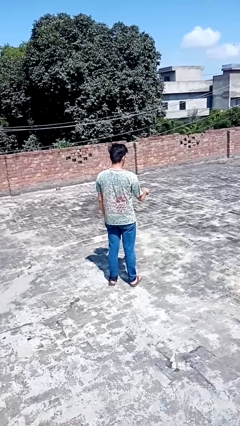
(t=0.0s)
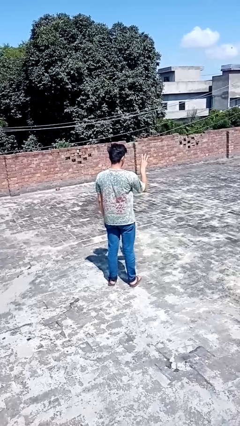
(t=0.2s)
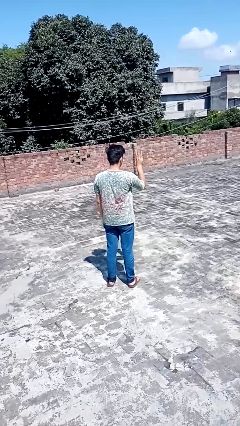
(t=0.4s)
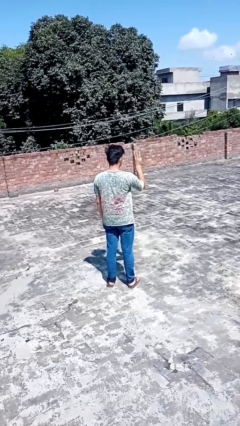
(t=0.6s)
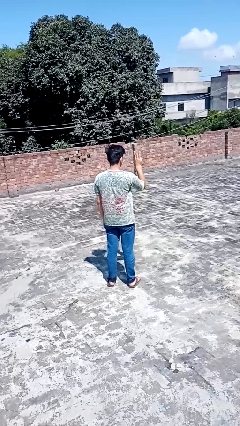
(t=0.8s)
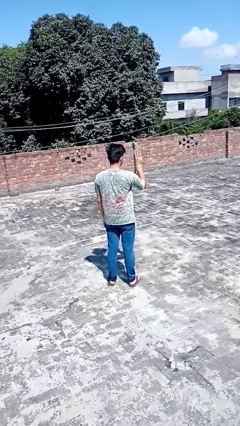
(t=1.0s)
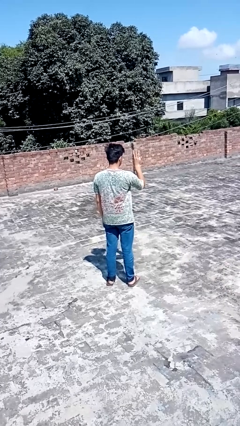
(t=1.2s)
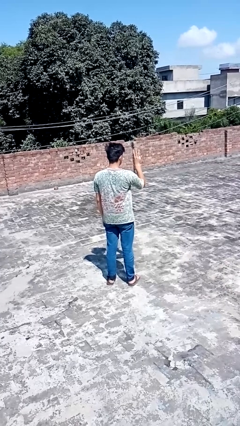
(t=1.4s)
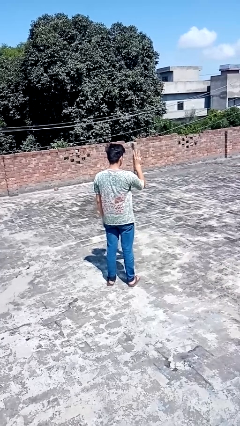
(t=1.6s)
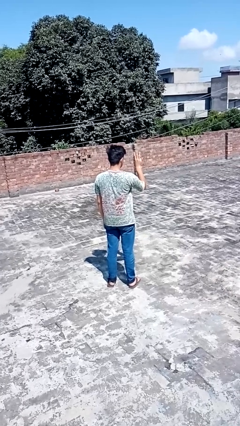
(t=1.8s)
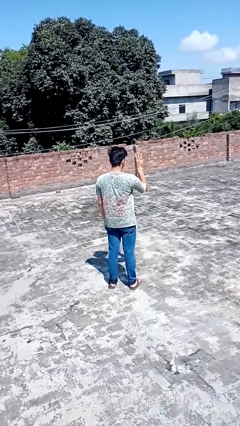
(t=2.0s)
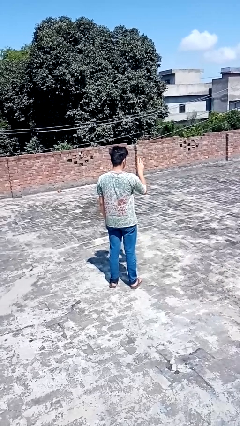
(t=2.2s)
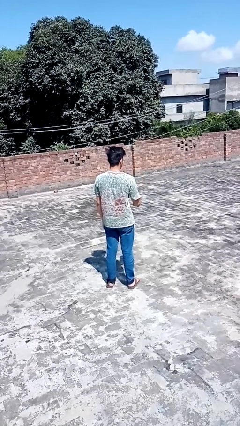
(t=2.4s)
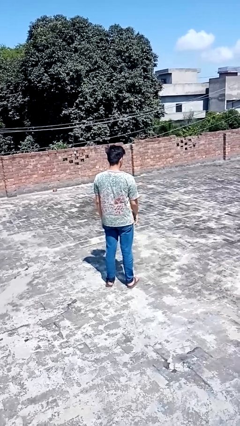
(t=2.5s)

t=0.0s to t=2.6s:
person gestures number three

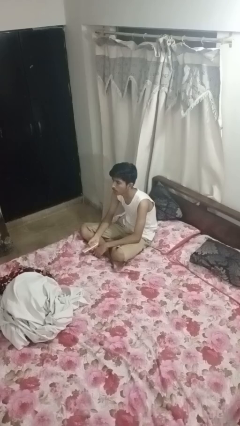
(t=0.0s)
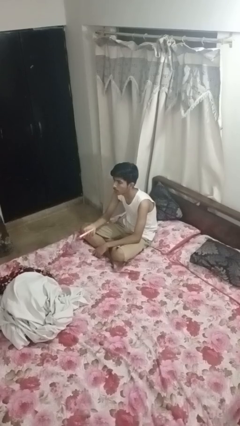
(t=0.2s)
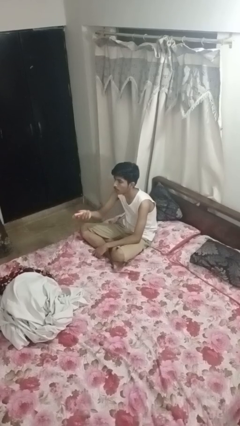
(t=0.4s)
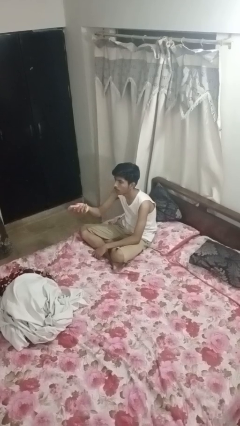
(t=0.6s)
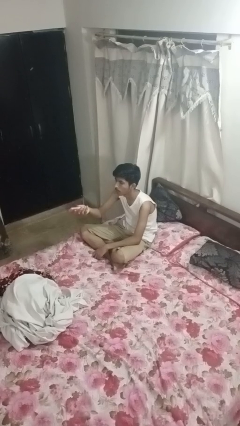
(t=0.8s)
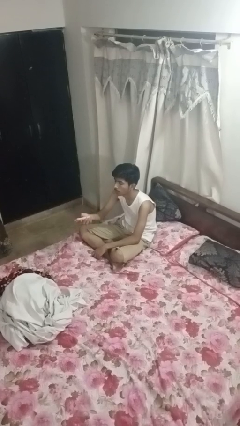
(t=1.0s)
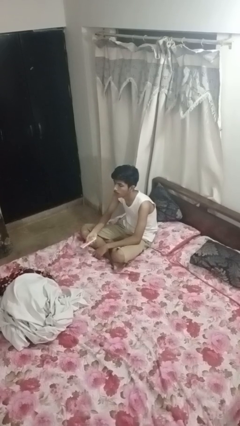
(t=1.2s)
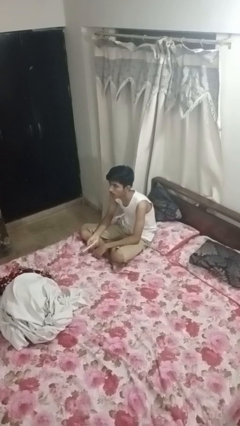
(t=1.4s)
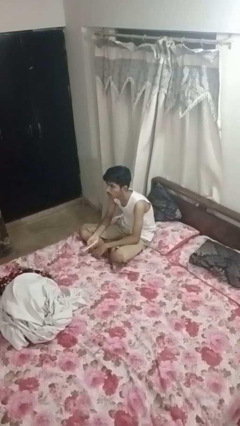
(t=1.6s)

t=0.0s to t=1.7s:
person uses television remote

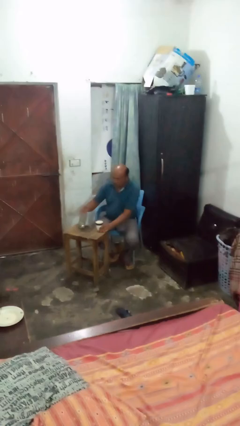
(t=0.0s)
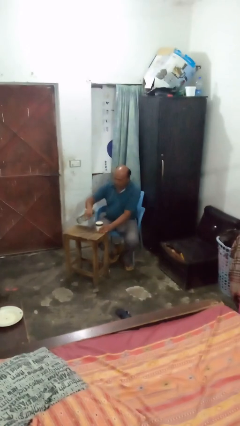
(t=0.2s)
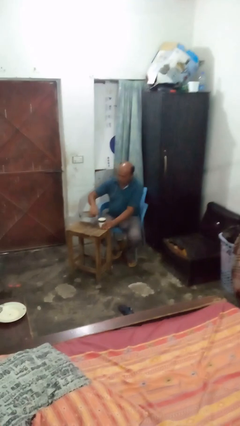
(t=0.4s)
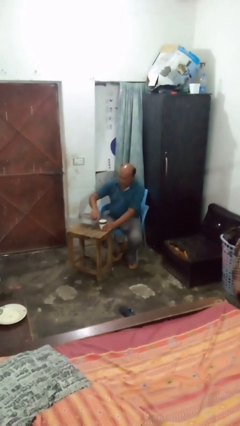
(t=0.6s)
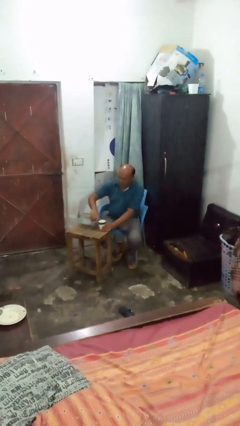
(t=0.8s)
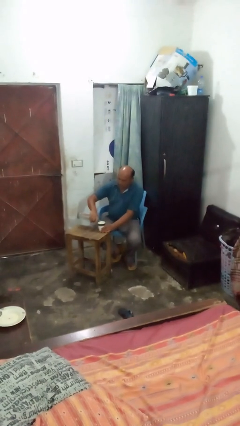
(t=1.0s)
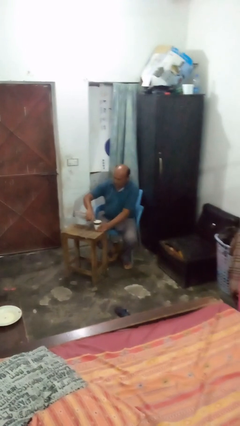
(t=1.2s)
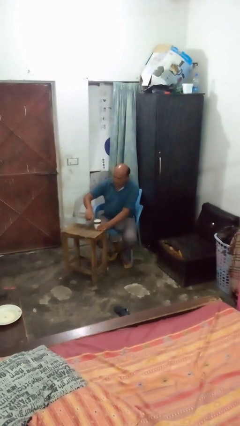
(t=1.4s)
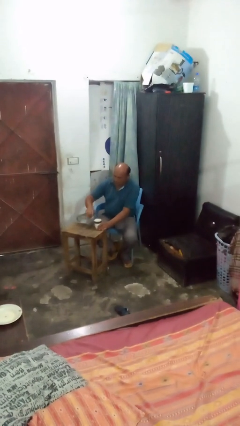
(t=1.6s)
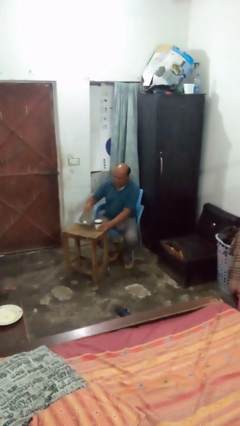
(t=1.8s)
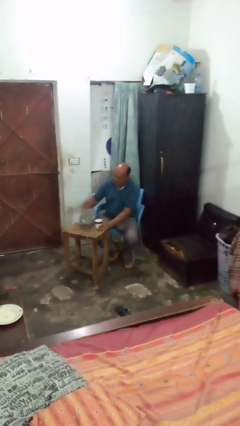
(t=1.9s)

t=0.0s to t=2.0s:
person pours liquid into cup

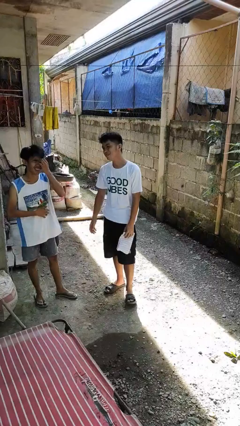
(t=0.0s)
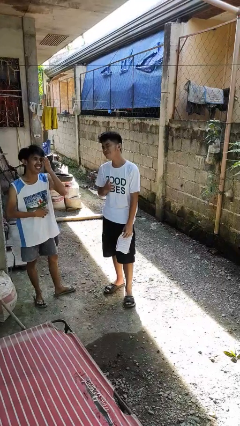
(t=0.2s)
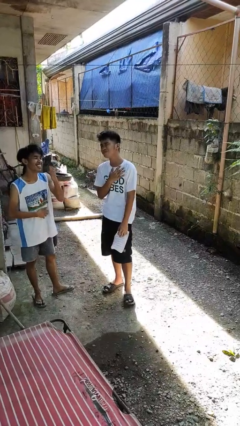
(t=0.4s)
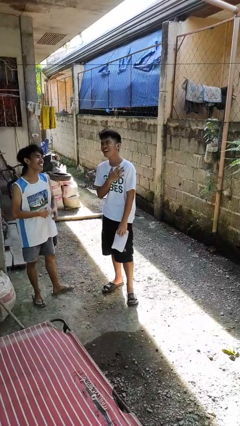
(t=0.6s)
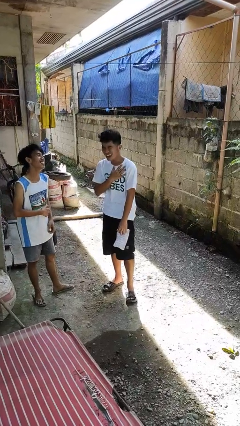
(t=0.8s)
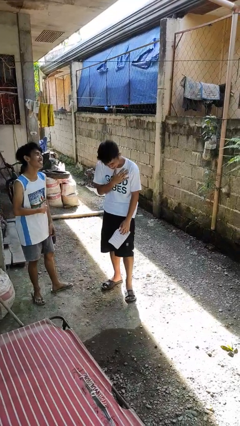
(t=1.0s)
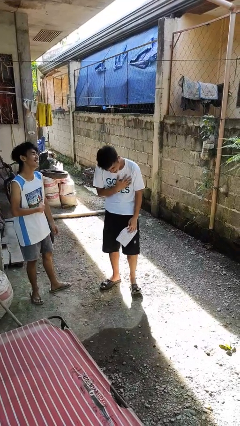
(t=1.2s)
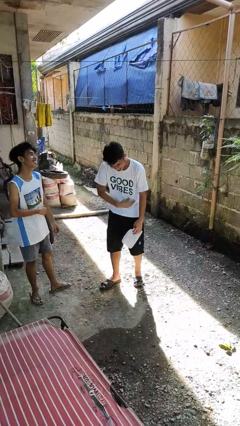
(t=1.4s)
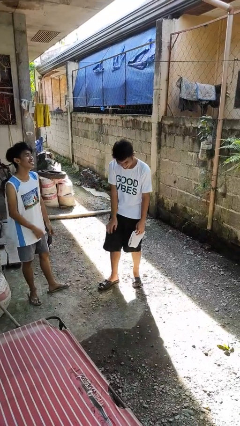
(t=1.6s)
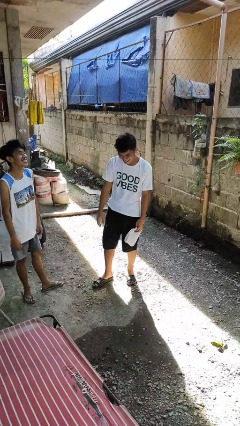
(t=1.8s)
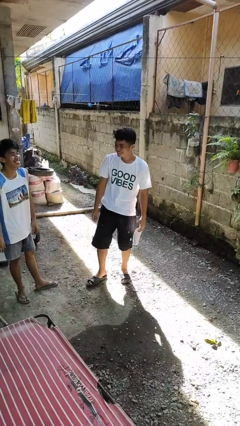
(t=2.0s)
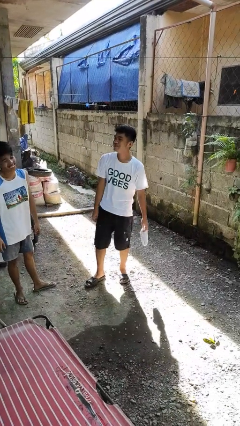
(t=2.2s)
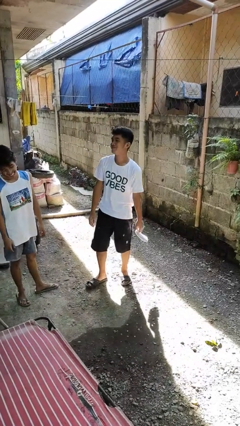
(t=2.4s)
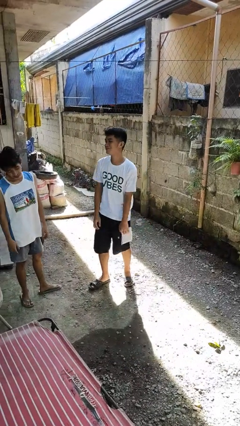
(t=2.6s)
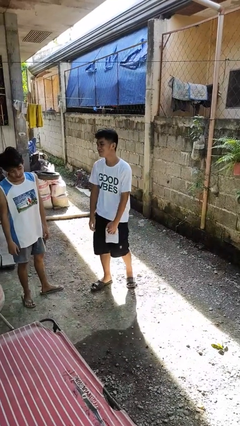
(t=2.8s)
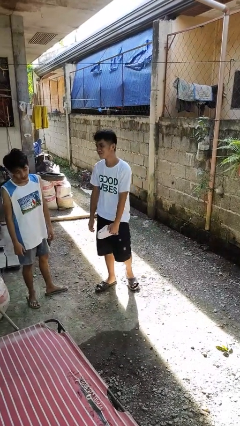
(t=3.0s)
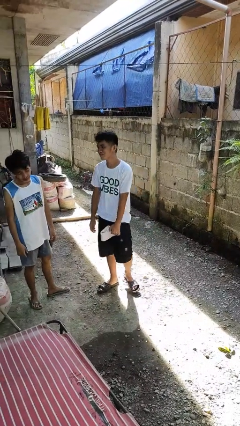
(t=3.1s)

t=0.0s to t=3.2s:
person laughs with person

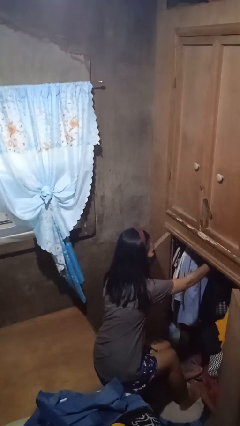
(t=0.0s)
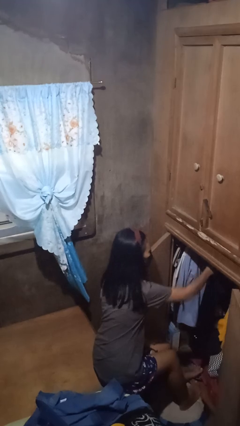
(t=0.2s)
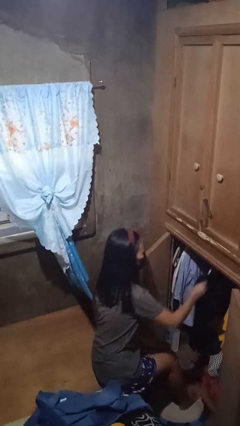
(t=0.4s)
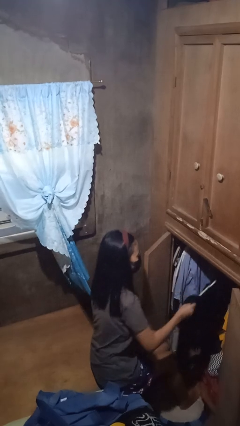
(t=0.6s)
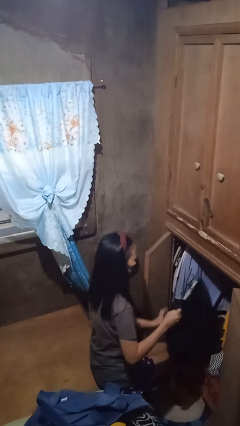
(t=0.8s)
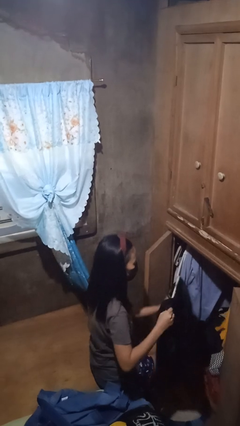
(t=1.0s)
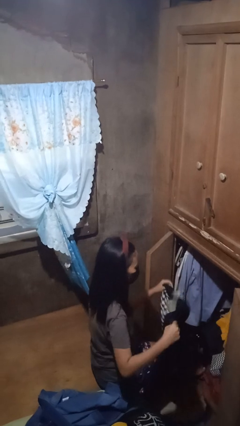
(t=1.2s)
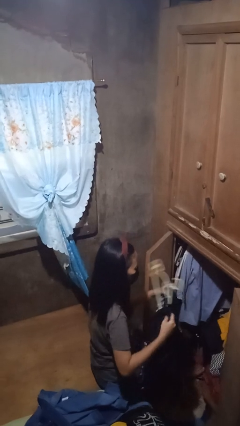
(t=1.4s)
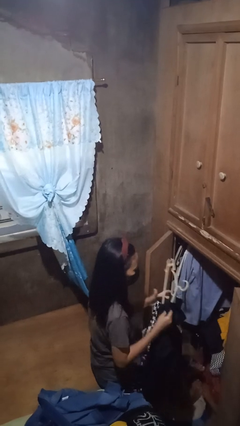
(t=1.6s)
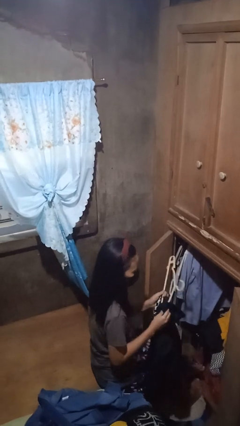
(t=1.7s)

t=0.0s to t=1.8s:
person takes clothes from closet

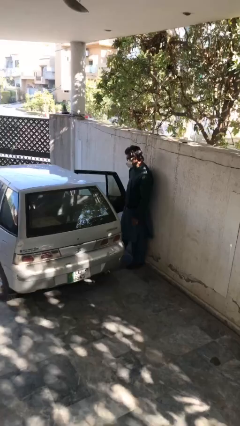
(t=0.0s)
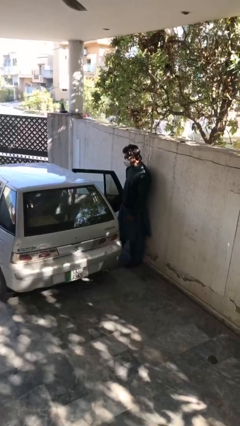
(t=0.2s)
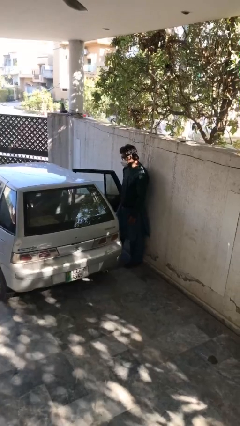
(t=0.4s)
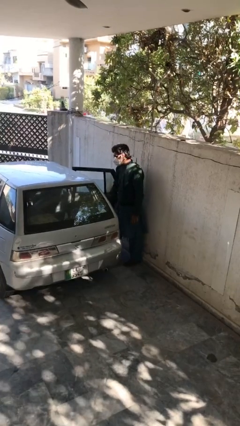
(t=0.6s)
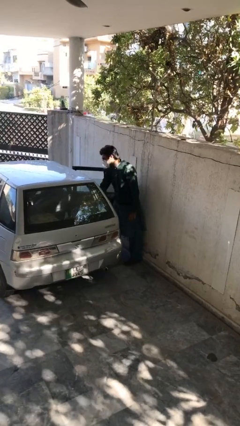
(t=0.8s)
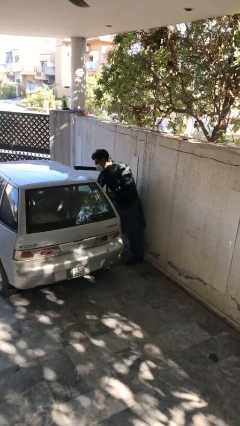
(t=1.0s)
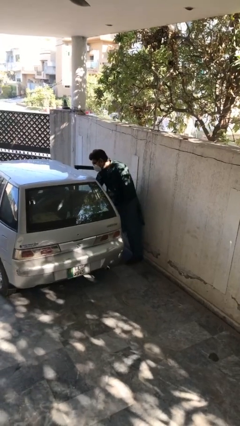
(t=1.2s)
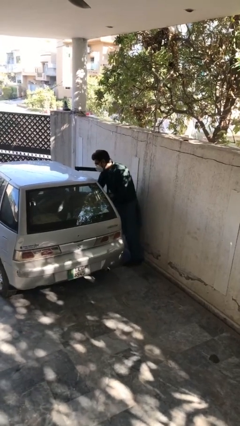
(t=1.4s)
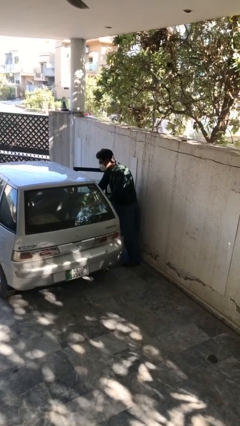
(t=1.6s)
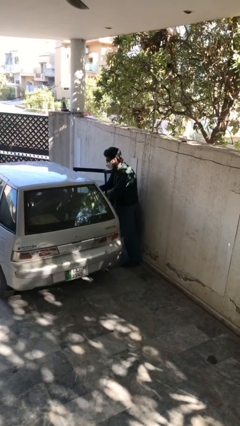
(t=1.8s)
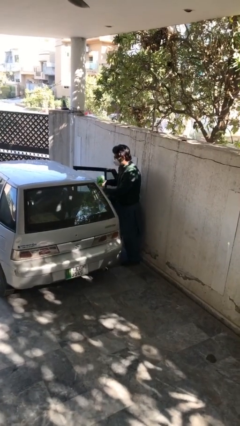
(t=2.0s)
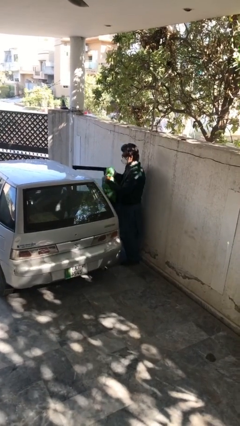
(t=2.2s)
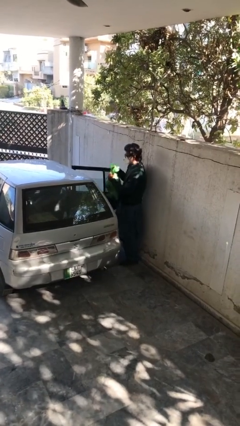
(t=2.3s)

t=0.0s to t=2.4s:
person unloads car

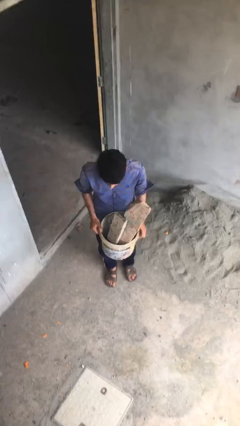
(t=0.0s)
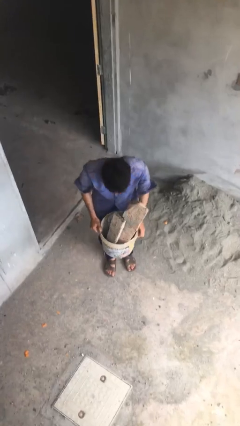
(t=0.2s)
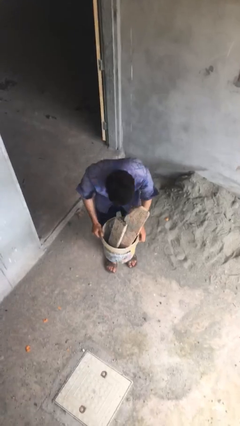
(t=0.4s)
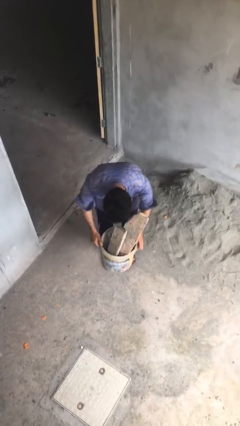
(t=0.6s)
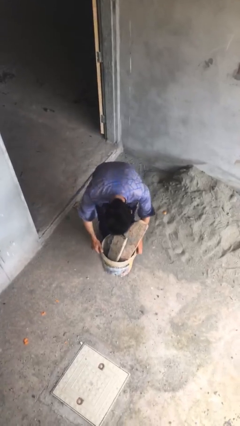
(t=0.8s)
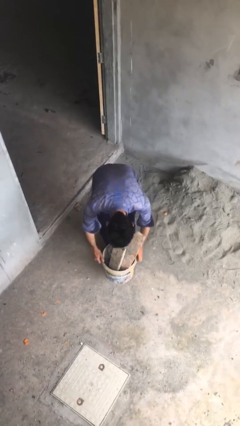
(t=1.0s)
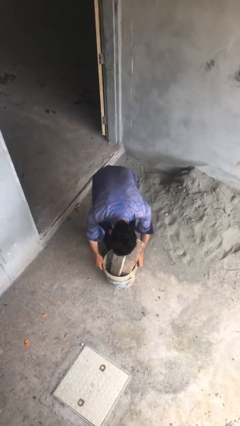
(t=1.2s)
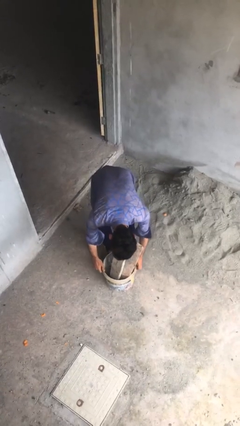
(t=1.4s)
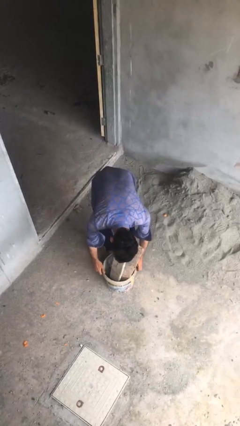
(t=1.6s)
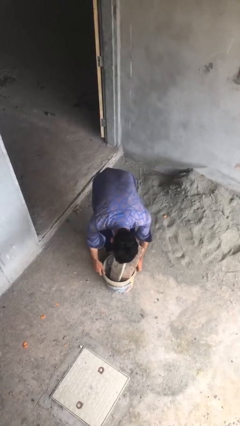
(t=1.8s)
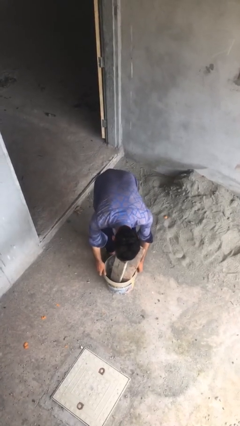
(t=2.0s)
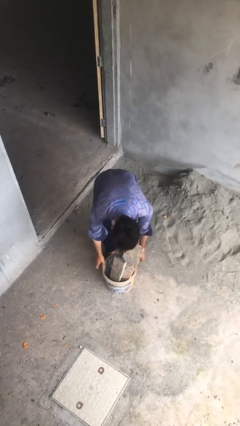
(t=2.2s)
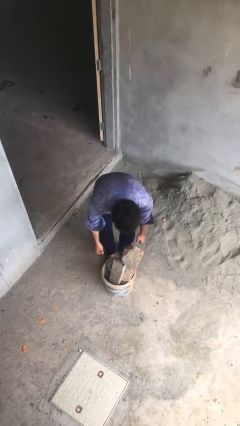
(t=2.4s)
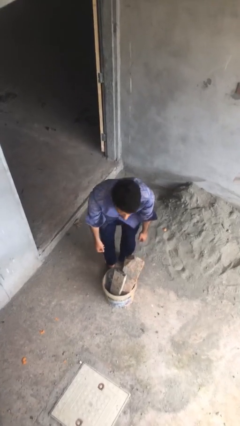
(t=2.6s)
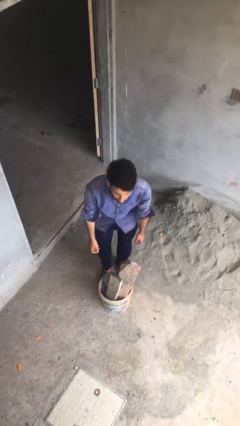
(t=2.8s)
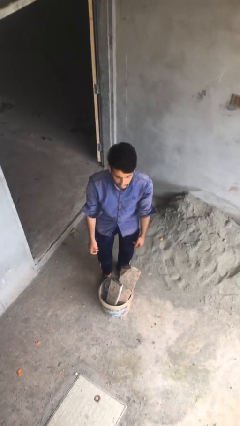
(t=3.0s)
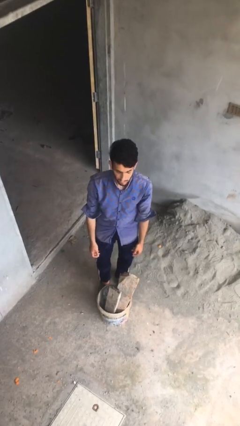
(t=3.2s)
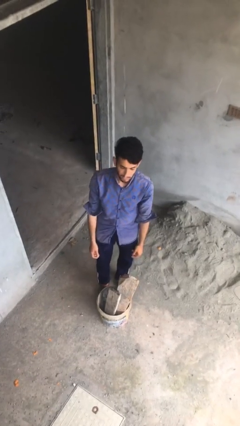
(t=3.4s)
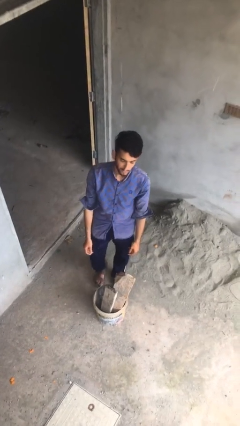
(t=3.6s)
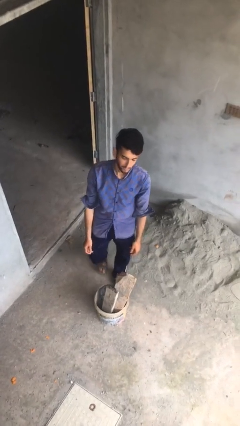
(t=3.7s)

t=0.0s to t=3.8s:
person puts down object on floor
